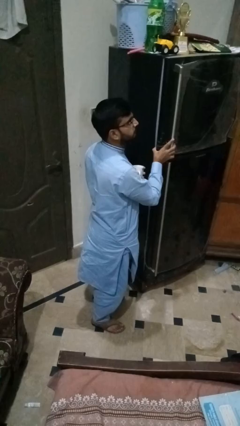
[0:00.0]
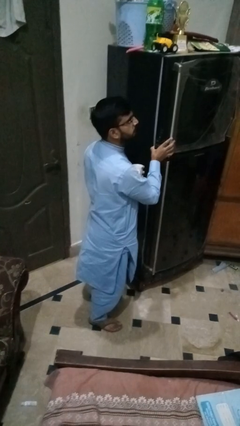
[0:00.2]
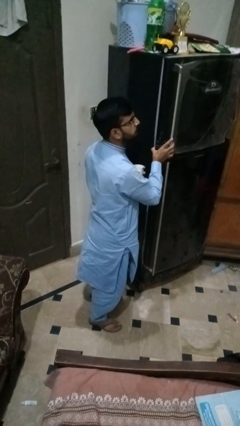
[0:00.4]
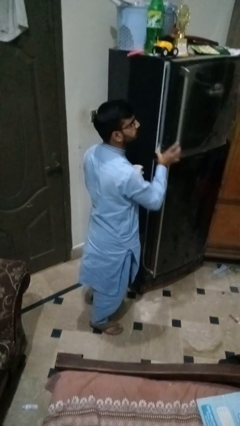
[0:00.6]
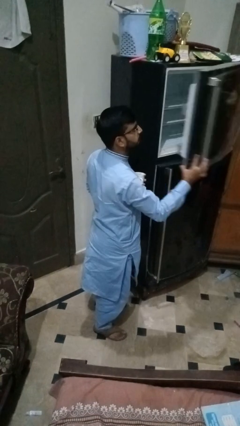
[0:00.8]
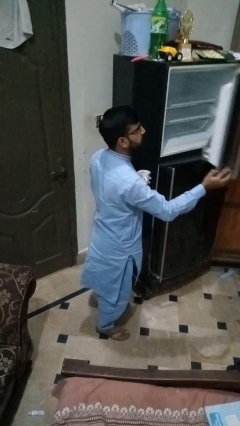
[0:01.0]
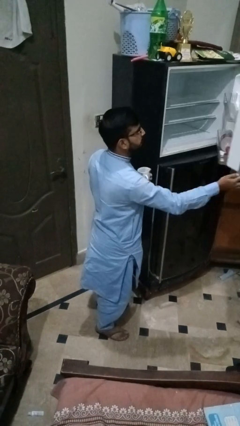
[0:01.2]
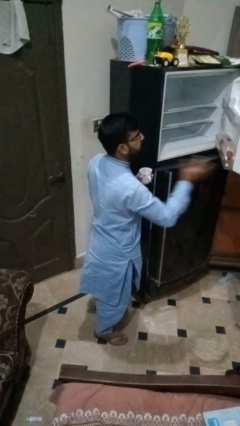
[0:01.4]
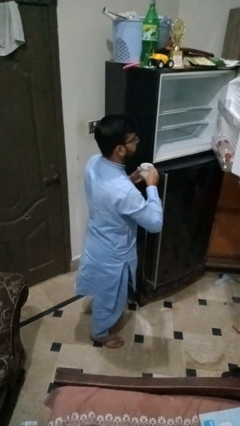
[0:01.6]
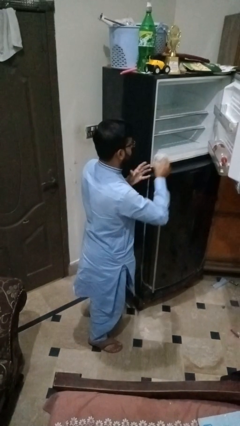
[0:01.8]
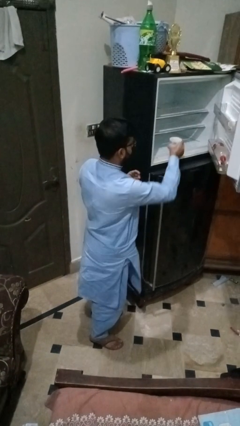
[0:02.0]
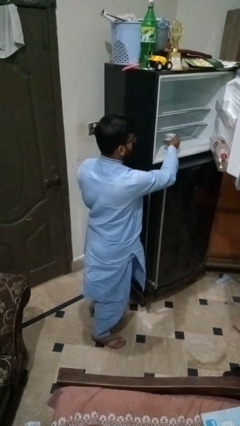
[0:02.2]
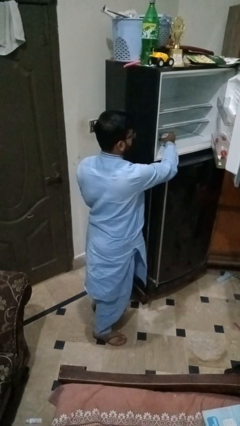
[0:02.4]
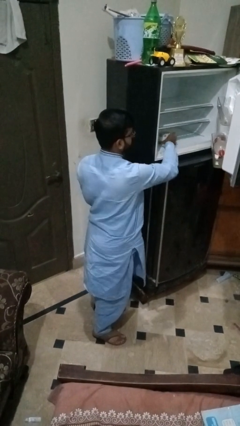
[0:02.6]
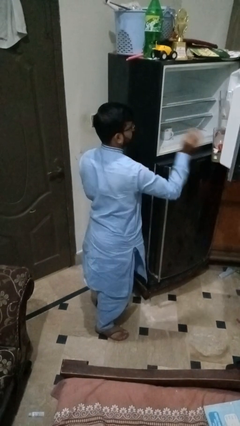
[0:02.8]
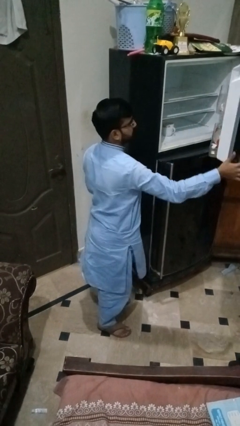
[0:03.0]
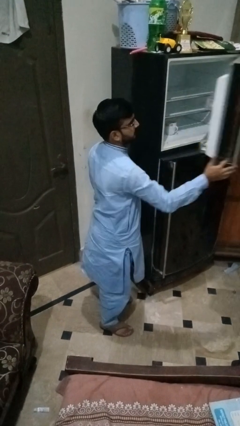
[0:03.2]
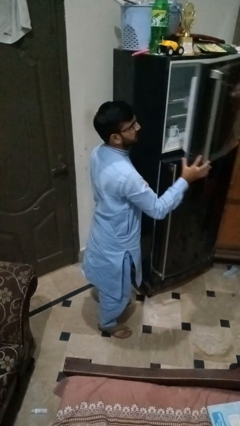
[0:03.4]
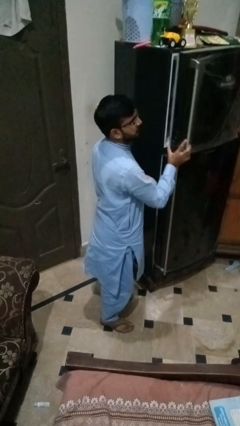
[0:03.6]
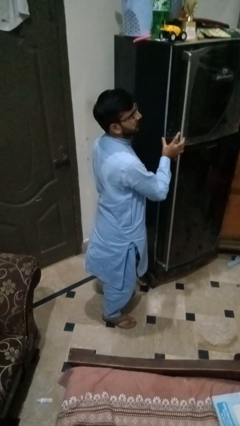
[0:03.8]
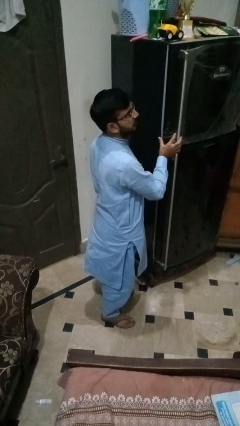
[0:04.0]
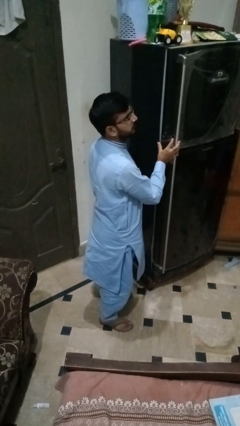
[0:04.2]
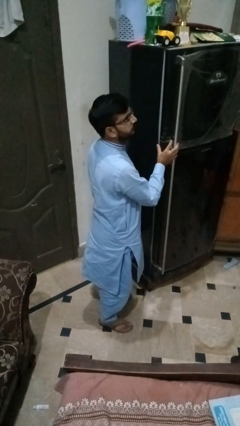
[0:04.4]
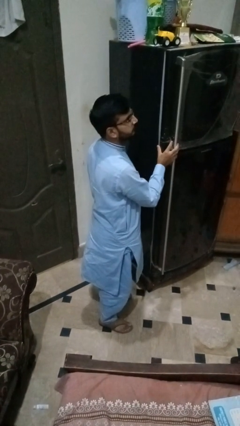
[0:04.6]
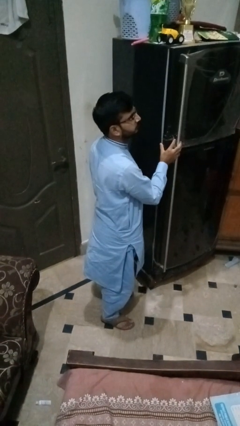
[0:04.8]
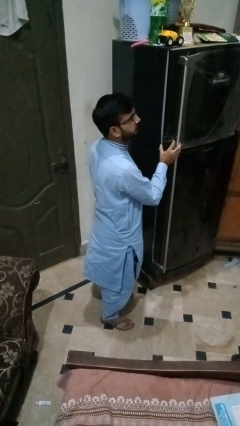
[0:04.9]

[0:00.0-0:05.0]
person puts object into refrigerator

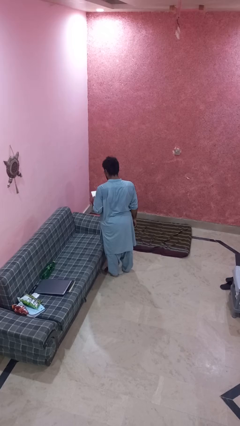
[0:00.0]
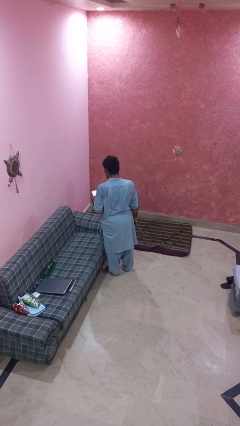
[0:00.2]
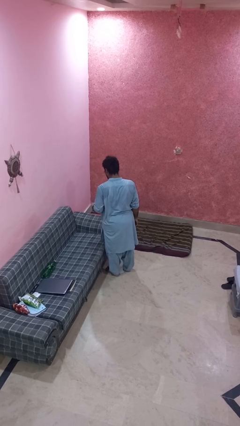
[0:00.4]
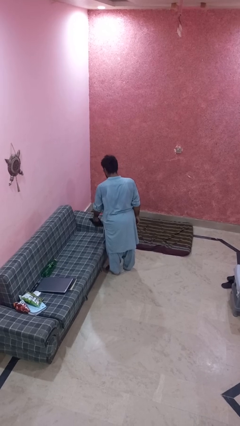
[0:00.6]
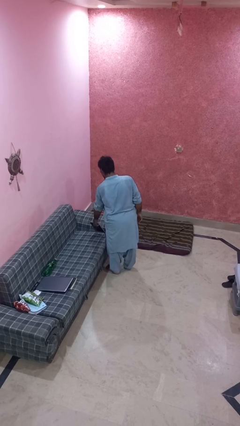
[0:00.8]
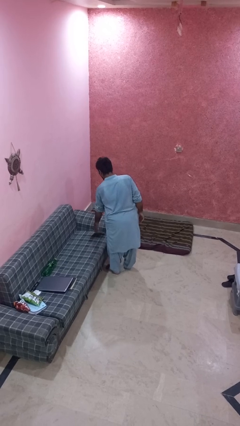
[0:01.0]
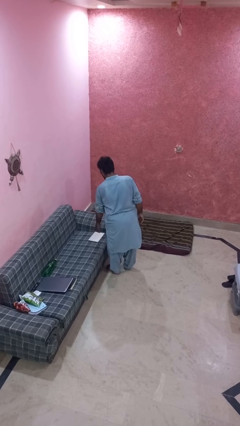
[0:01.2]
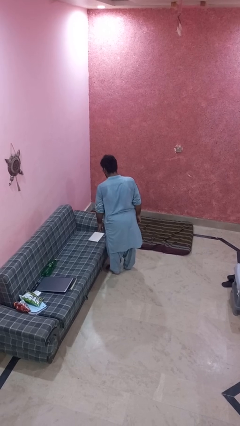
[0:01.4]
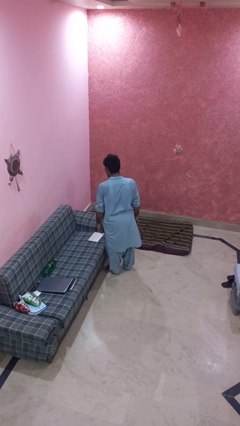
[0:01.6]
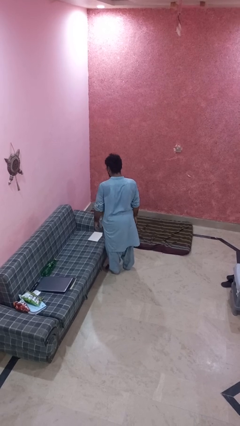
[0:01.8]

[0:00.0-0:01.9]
person puts down object on couch

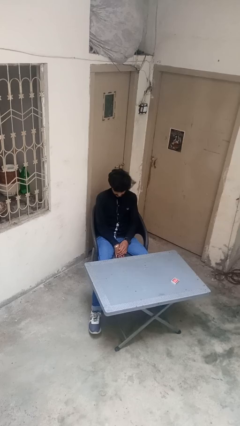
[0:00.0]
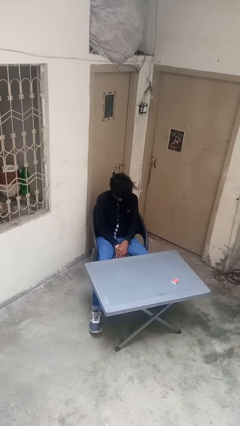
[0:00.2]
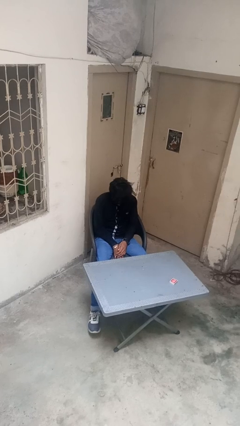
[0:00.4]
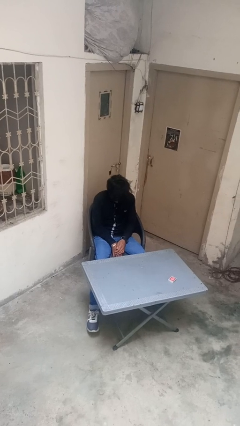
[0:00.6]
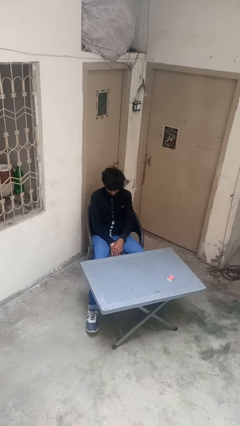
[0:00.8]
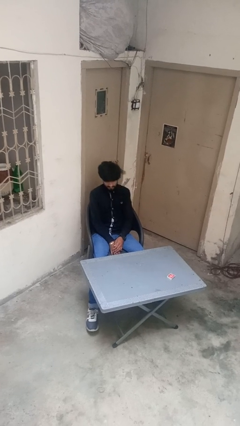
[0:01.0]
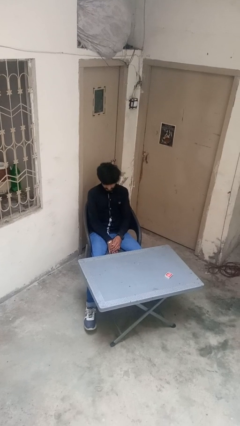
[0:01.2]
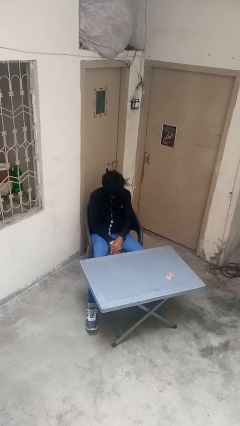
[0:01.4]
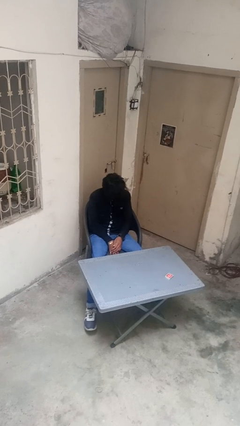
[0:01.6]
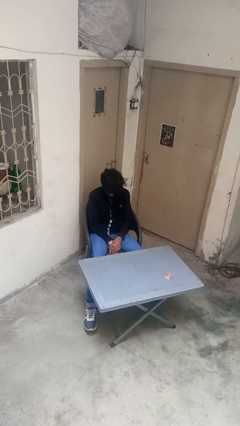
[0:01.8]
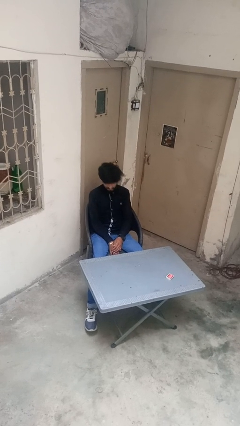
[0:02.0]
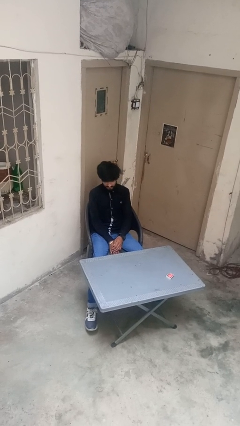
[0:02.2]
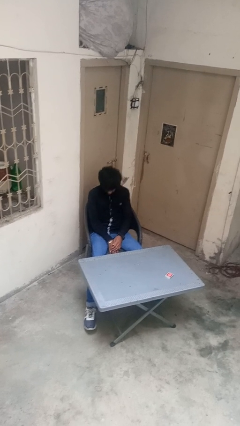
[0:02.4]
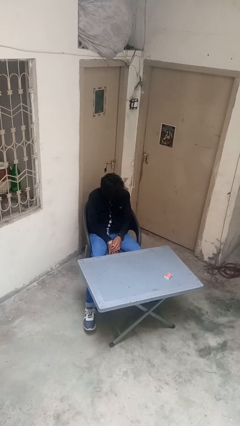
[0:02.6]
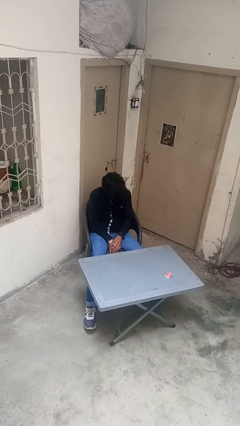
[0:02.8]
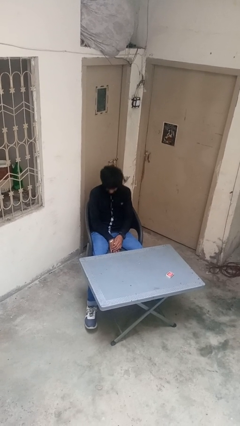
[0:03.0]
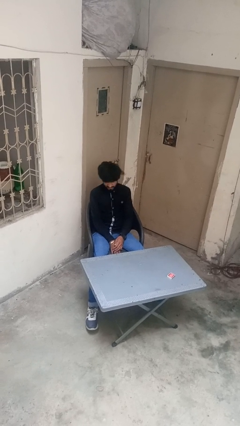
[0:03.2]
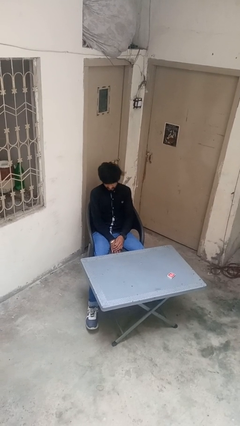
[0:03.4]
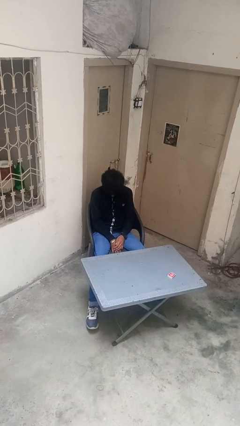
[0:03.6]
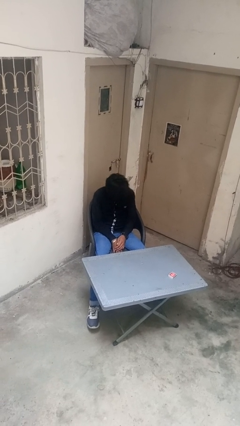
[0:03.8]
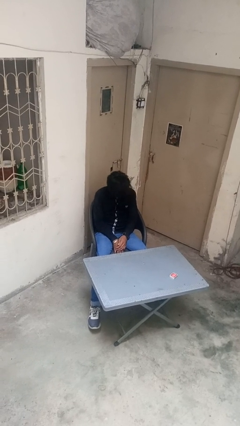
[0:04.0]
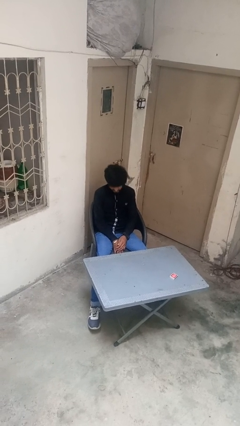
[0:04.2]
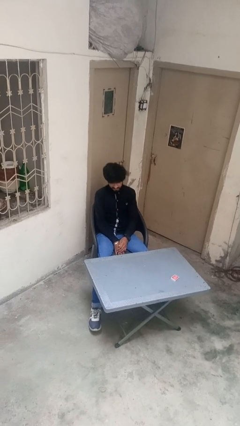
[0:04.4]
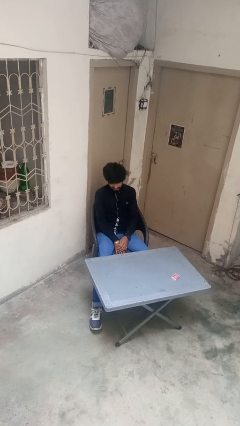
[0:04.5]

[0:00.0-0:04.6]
person nods head

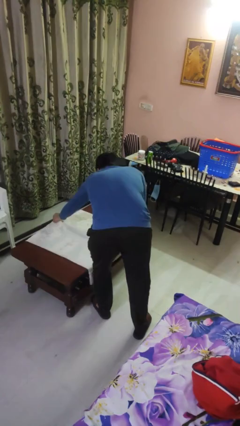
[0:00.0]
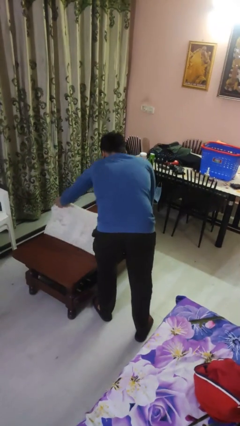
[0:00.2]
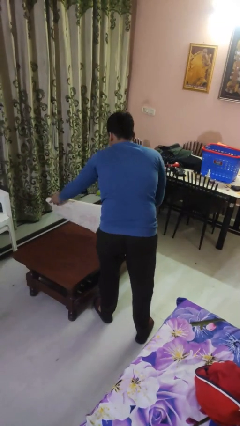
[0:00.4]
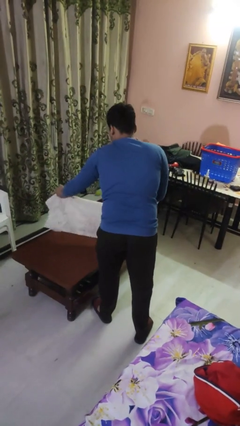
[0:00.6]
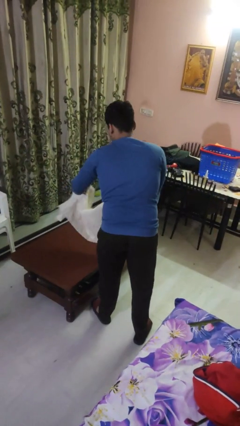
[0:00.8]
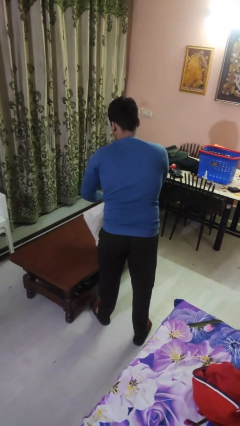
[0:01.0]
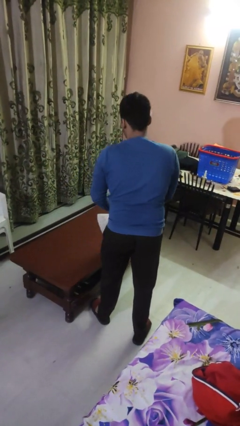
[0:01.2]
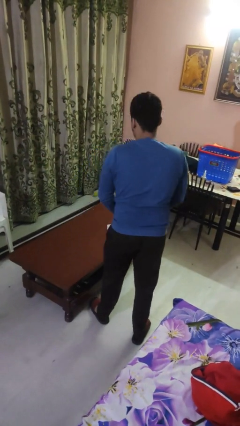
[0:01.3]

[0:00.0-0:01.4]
person folds tablecloth

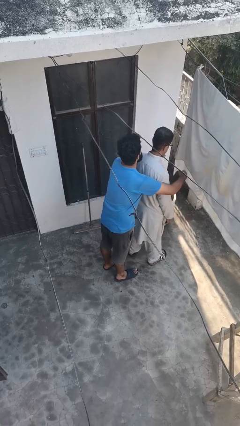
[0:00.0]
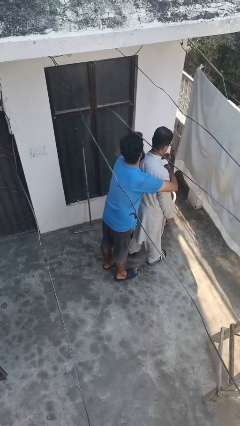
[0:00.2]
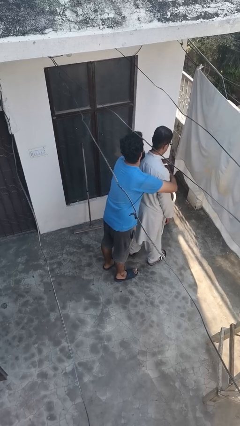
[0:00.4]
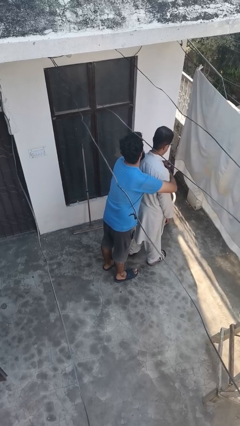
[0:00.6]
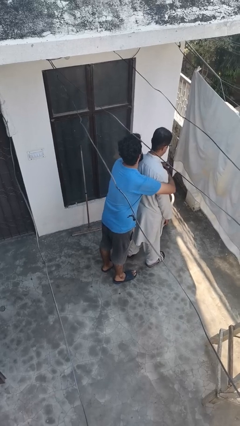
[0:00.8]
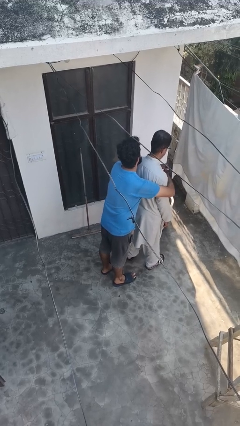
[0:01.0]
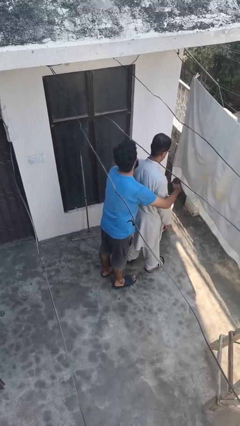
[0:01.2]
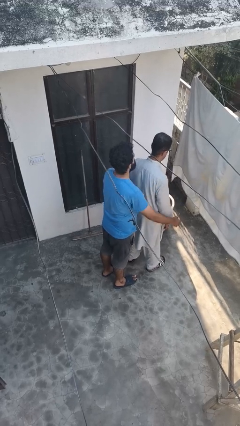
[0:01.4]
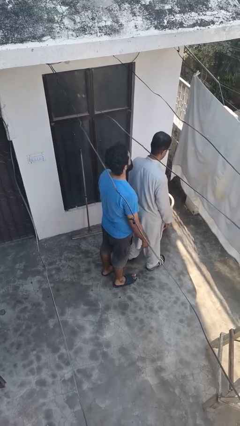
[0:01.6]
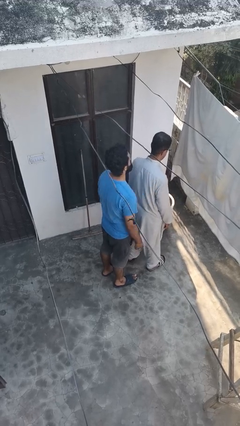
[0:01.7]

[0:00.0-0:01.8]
person hugs person from behind

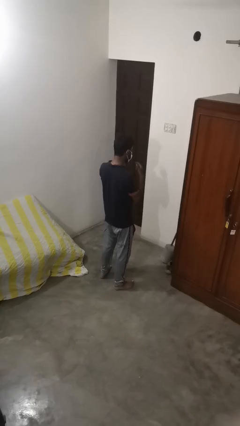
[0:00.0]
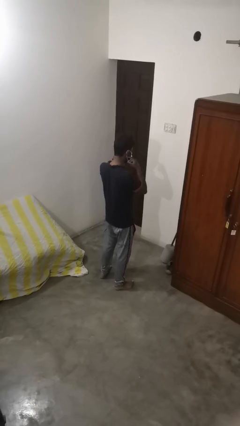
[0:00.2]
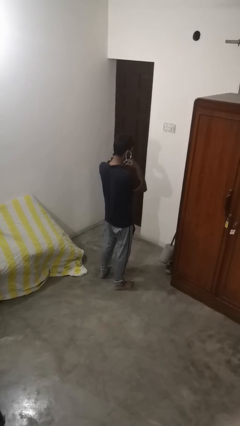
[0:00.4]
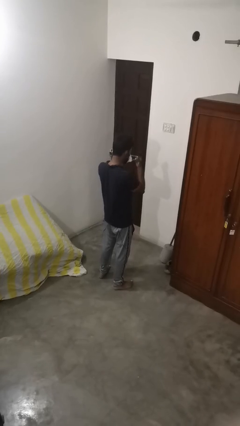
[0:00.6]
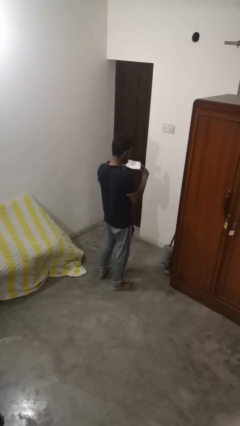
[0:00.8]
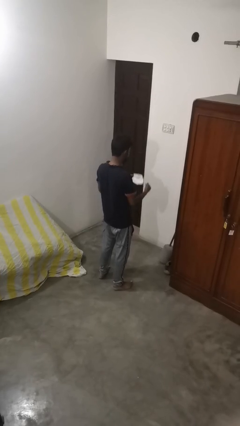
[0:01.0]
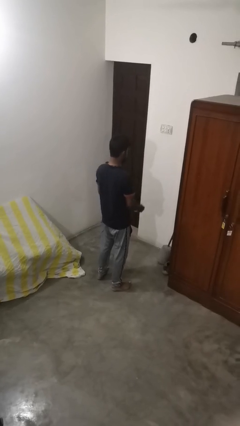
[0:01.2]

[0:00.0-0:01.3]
person takes off facemask

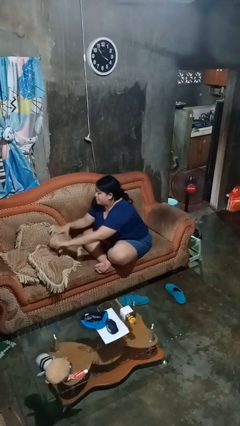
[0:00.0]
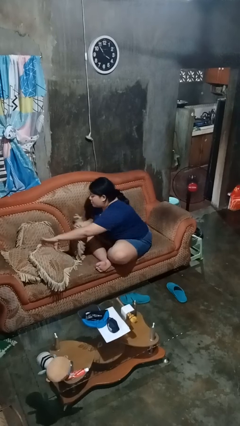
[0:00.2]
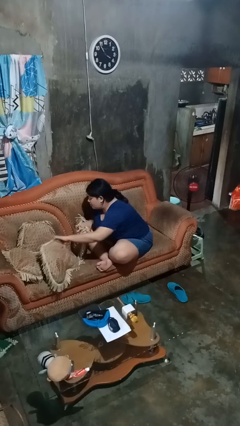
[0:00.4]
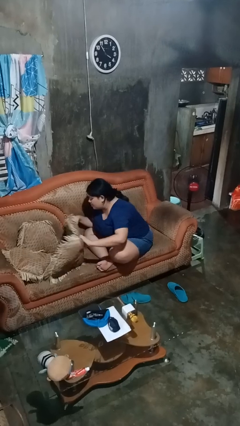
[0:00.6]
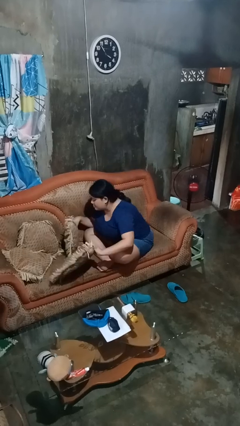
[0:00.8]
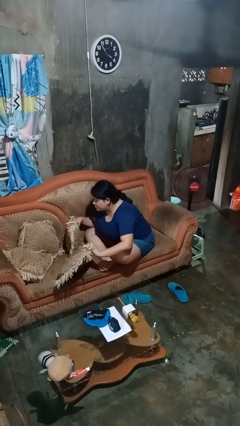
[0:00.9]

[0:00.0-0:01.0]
person searches in couch

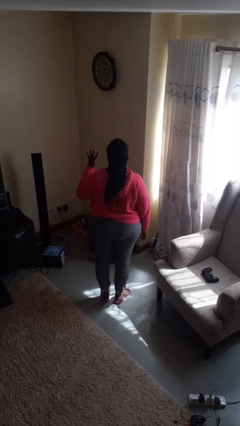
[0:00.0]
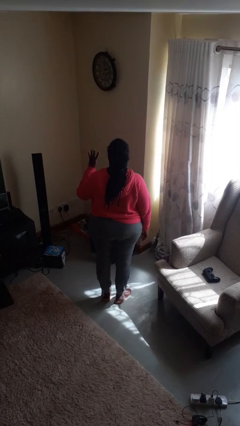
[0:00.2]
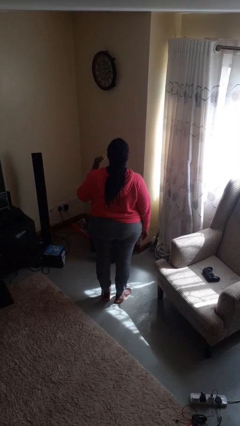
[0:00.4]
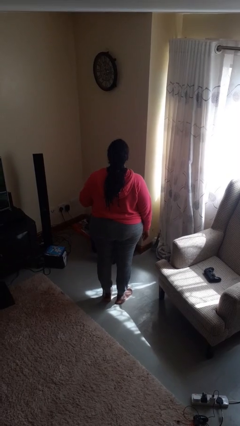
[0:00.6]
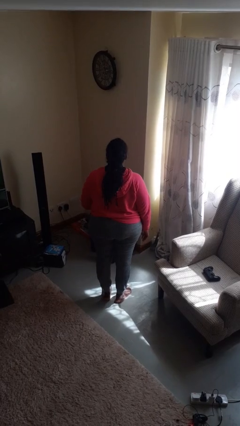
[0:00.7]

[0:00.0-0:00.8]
person gestures number four
